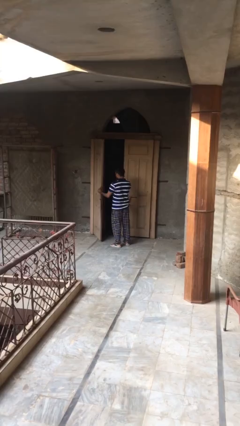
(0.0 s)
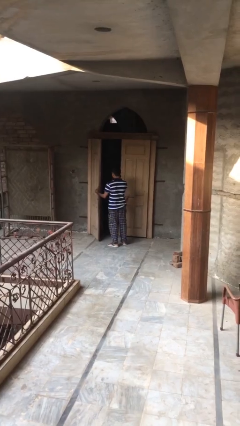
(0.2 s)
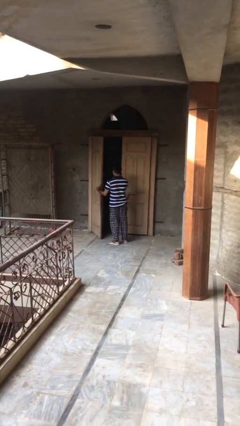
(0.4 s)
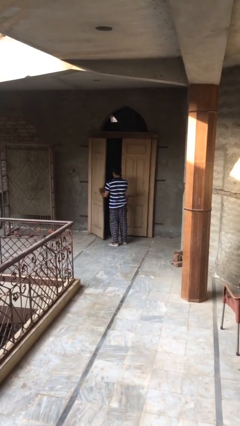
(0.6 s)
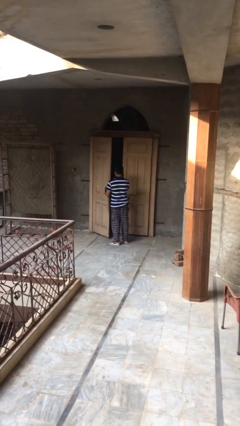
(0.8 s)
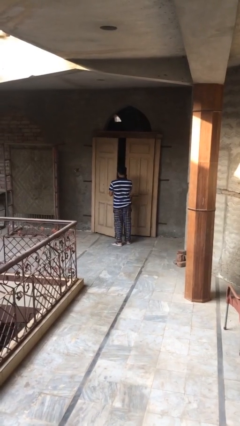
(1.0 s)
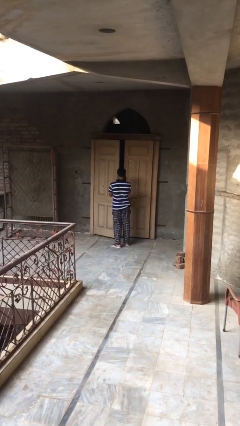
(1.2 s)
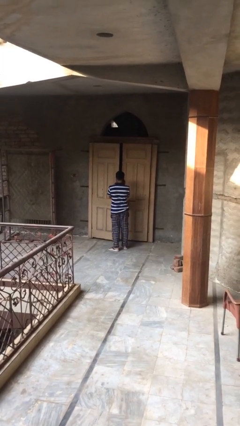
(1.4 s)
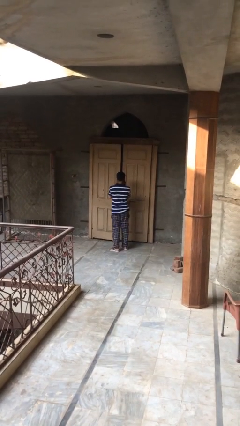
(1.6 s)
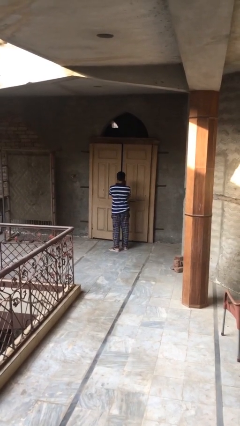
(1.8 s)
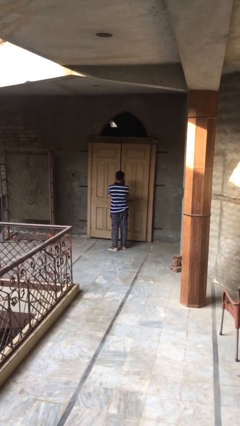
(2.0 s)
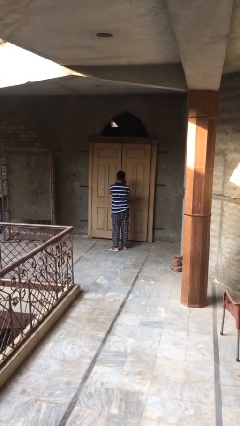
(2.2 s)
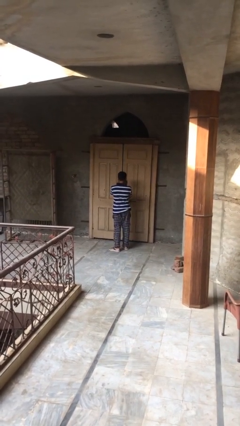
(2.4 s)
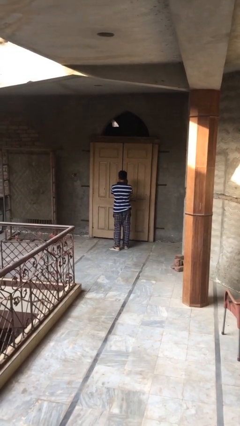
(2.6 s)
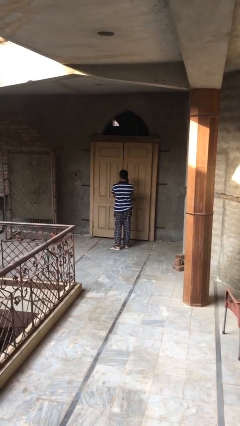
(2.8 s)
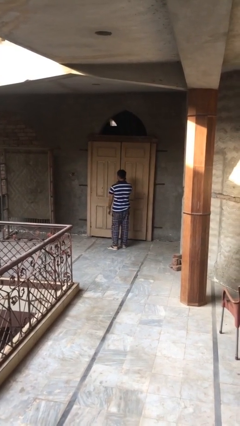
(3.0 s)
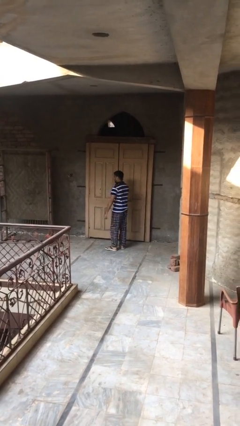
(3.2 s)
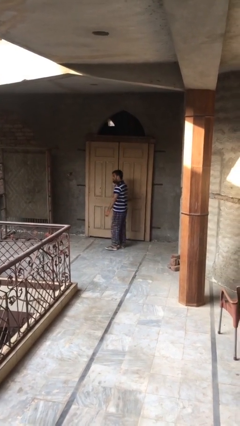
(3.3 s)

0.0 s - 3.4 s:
person closes facility door

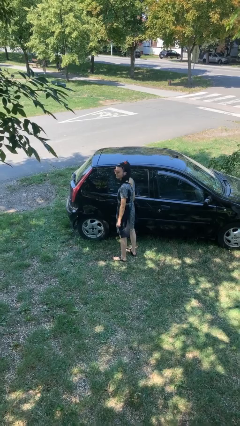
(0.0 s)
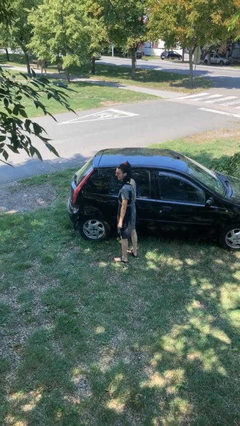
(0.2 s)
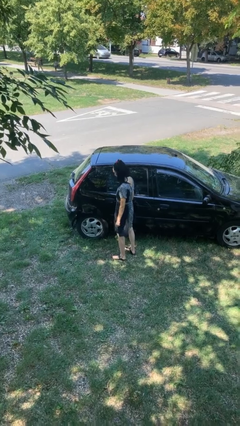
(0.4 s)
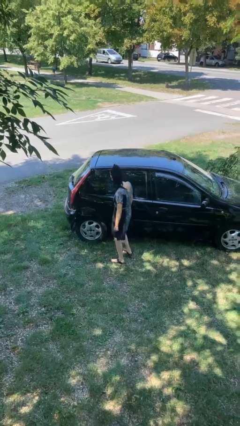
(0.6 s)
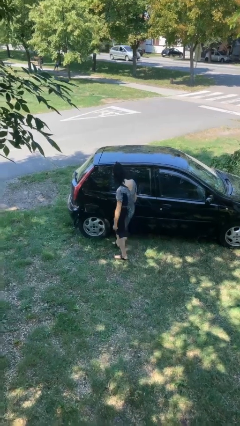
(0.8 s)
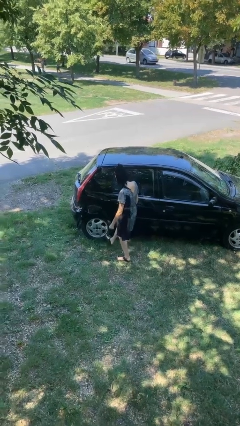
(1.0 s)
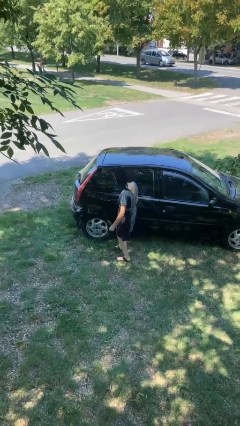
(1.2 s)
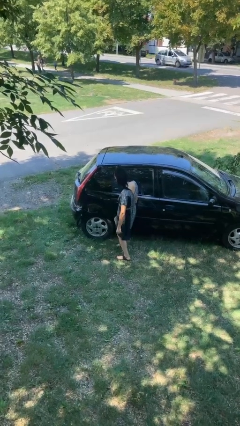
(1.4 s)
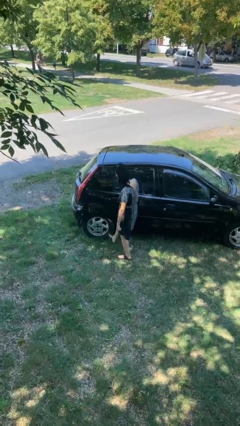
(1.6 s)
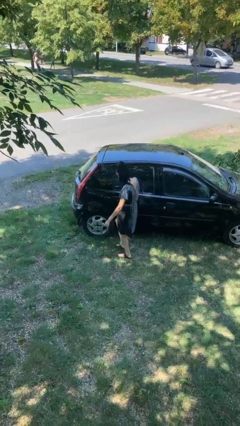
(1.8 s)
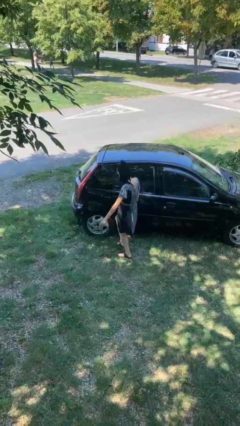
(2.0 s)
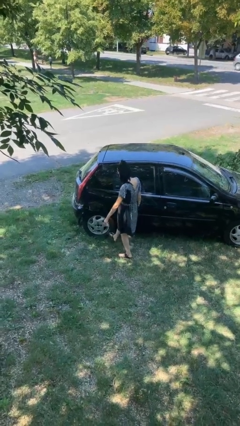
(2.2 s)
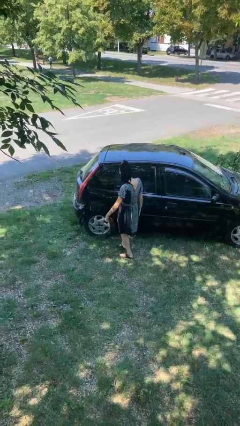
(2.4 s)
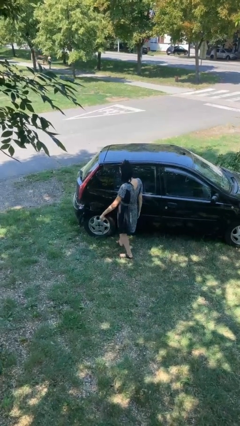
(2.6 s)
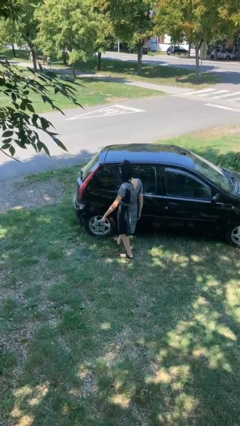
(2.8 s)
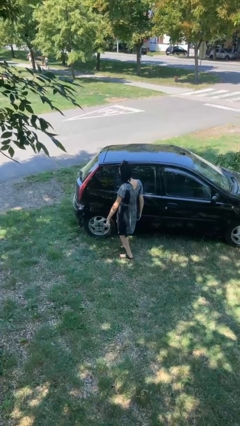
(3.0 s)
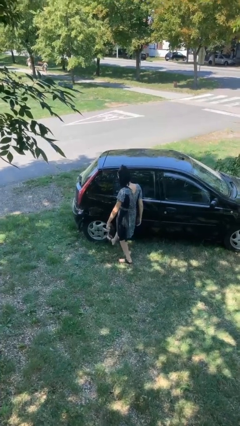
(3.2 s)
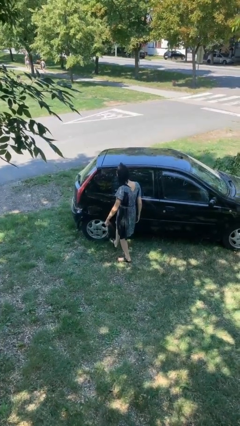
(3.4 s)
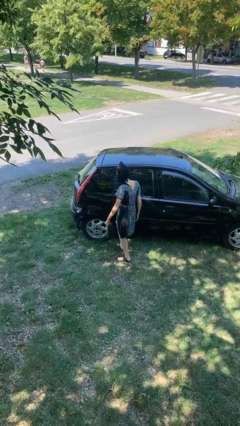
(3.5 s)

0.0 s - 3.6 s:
person kicks car tires

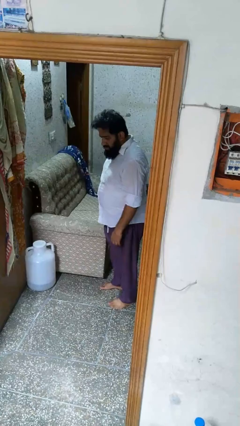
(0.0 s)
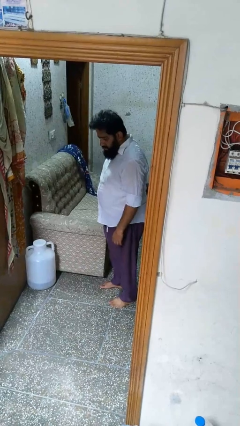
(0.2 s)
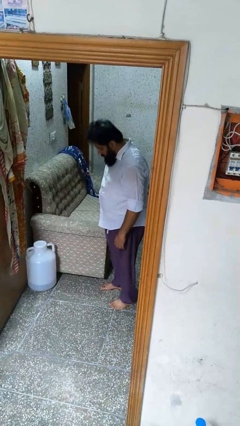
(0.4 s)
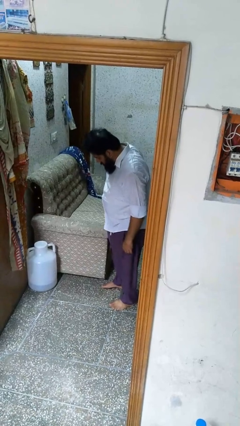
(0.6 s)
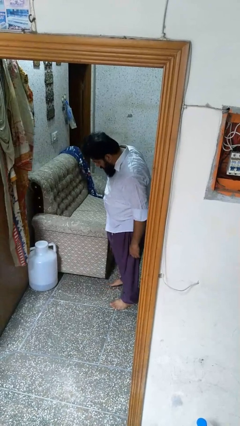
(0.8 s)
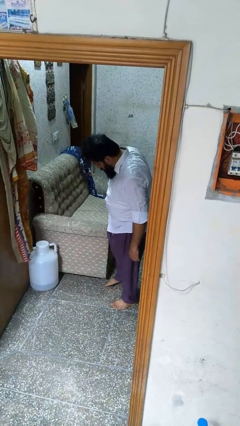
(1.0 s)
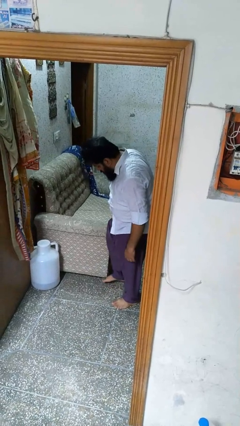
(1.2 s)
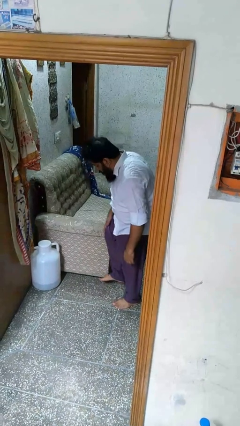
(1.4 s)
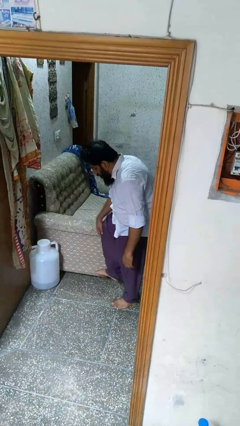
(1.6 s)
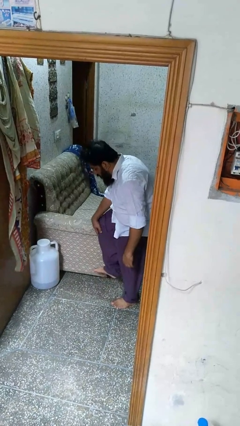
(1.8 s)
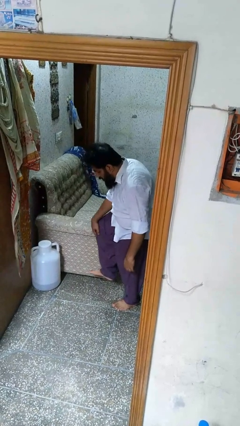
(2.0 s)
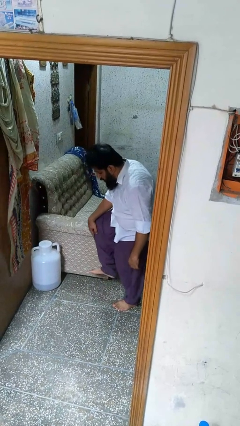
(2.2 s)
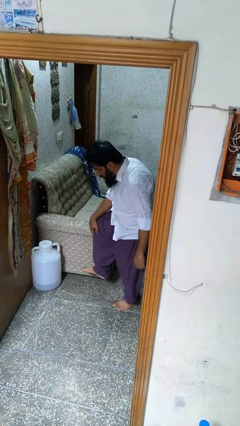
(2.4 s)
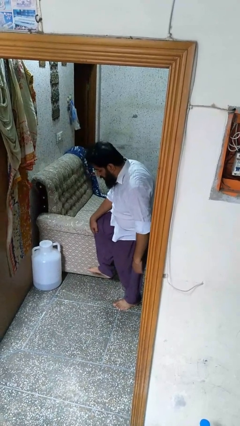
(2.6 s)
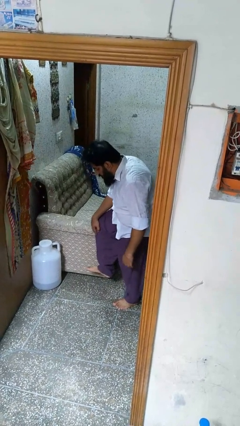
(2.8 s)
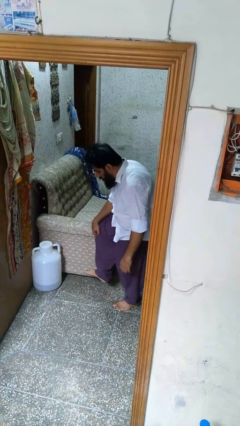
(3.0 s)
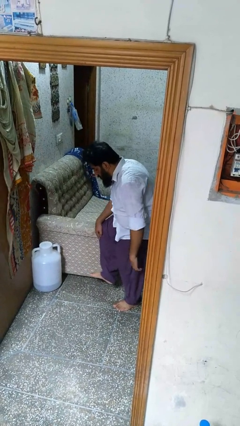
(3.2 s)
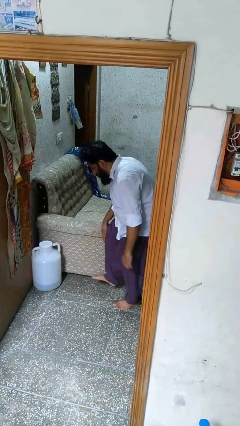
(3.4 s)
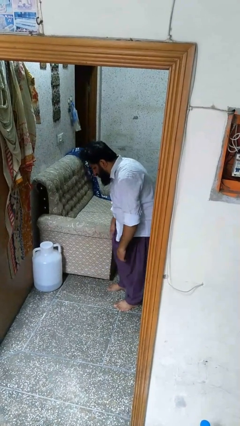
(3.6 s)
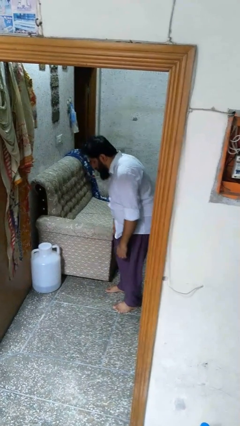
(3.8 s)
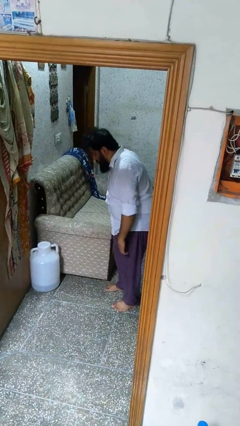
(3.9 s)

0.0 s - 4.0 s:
person stubs toe

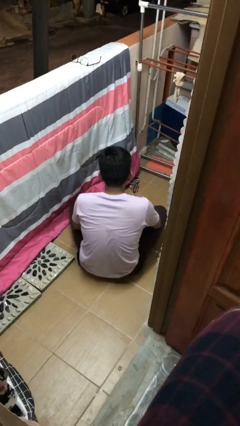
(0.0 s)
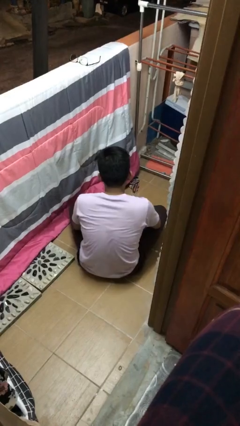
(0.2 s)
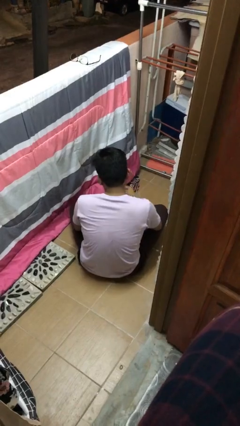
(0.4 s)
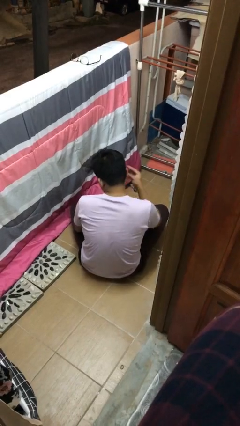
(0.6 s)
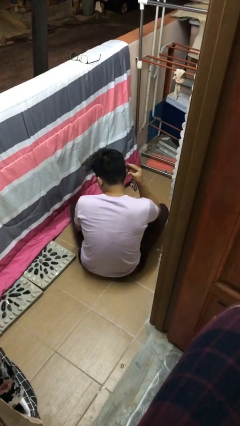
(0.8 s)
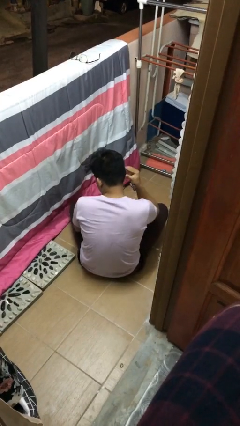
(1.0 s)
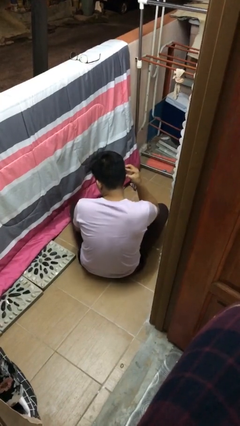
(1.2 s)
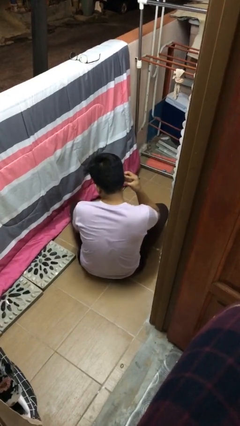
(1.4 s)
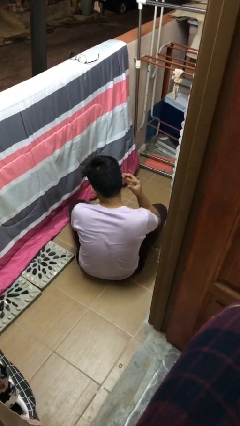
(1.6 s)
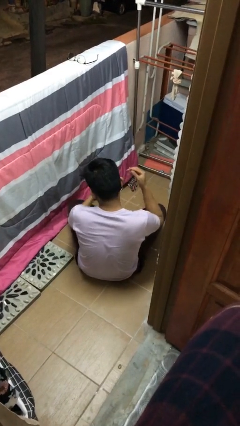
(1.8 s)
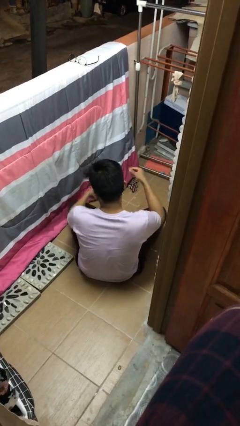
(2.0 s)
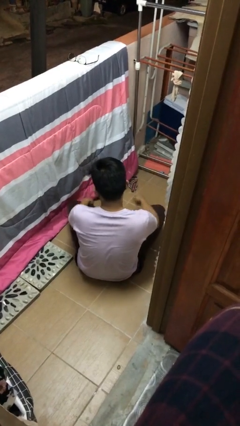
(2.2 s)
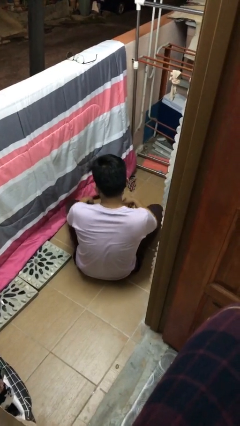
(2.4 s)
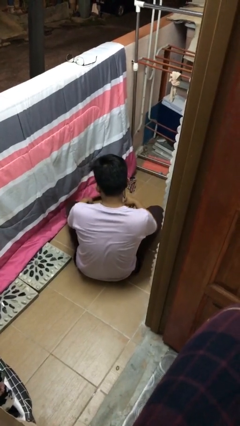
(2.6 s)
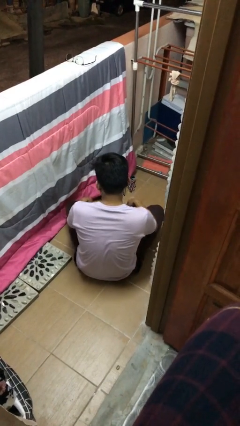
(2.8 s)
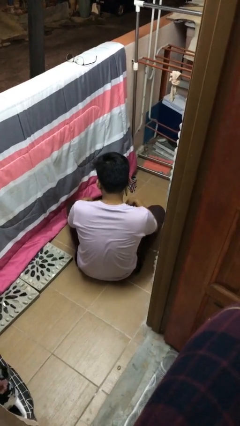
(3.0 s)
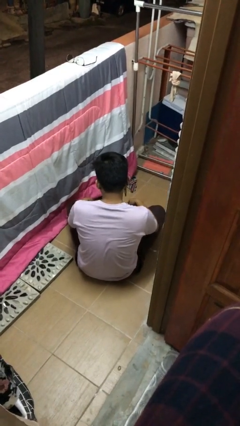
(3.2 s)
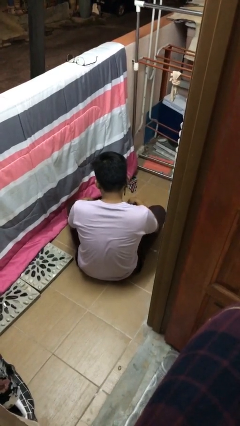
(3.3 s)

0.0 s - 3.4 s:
person puts on earrings

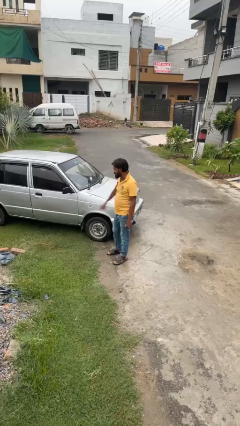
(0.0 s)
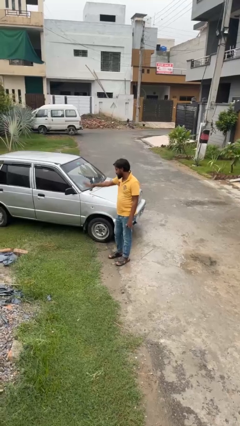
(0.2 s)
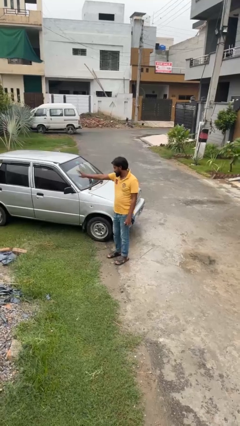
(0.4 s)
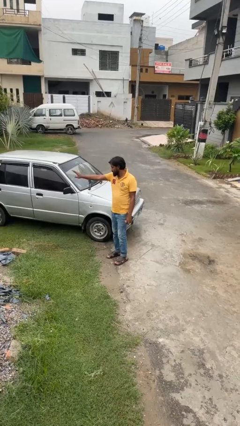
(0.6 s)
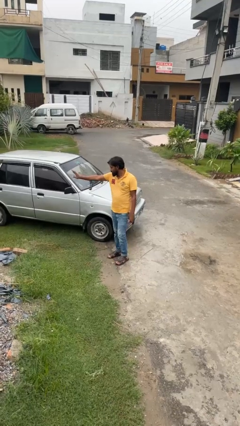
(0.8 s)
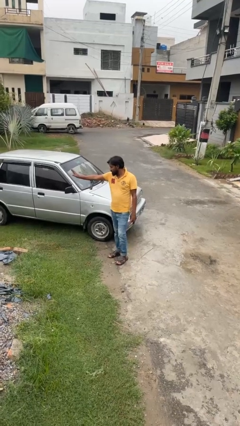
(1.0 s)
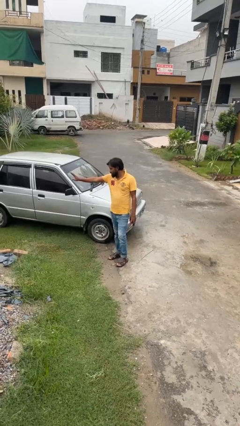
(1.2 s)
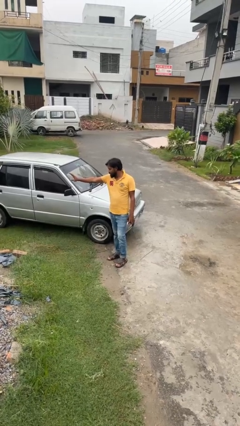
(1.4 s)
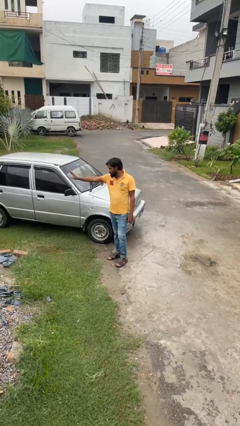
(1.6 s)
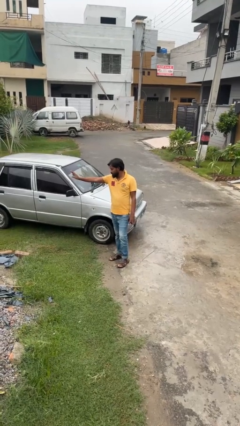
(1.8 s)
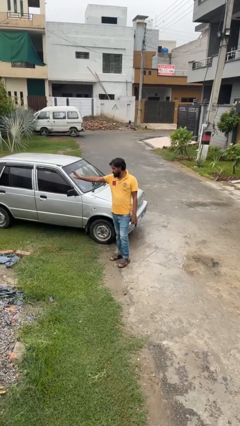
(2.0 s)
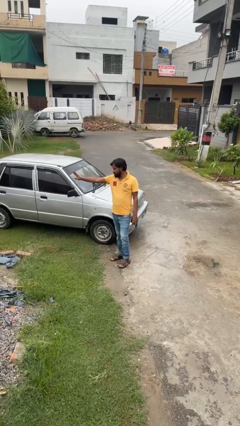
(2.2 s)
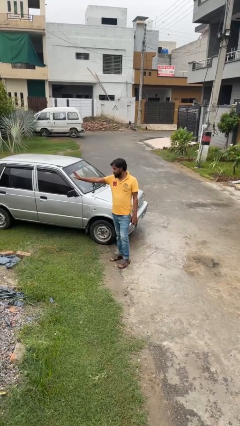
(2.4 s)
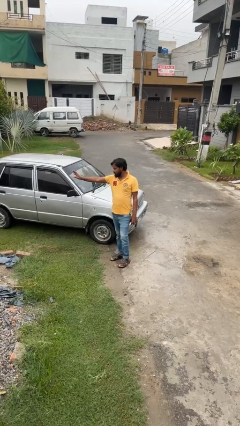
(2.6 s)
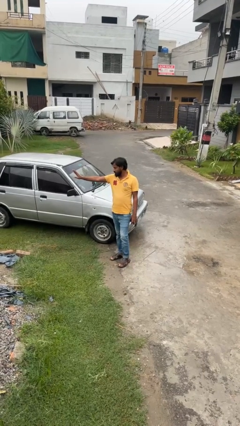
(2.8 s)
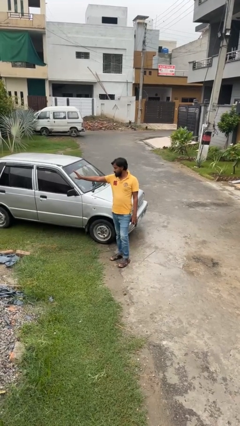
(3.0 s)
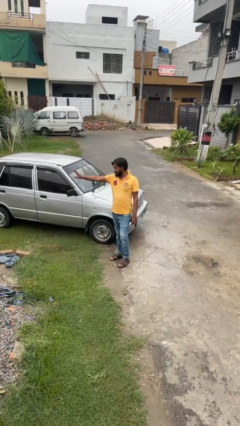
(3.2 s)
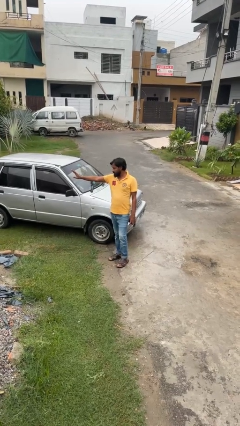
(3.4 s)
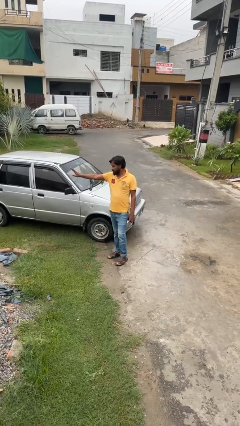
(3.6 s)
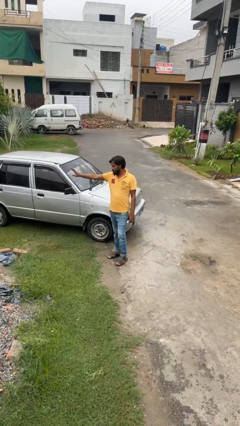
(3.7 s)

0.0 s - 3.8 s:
person waves at person
